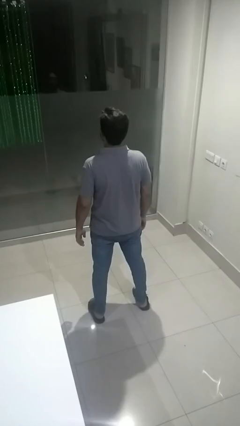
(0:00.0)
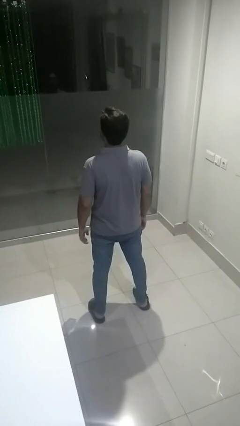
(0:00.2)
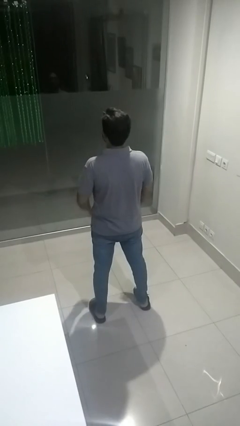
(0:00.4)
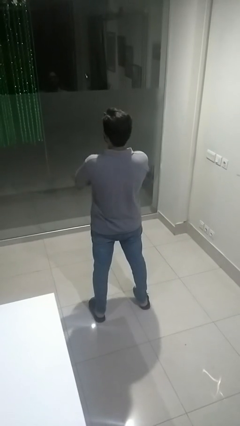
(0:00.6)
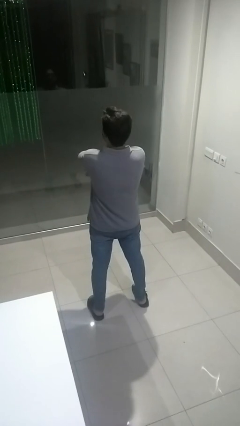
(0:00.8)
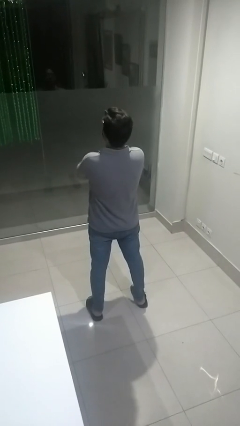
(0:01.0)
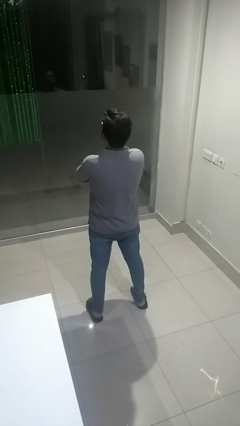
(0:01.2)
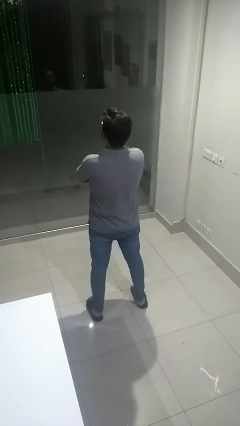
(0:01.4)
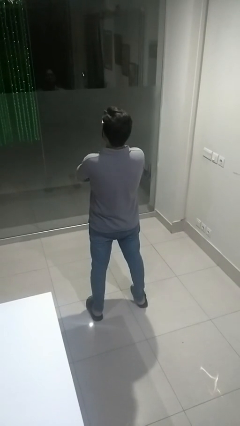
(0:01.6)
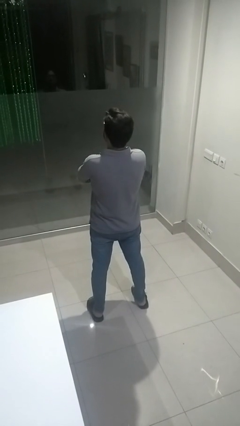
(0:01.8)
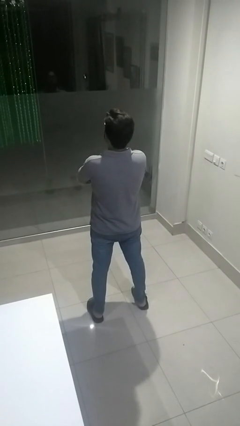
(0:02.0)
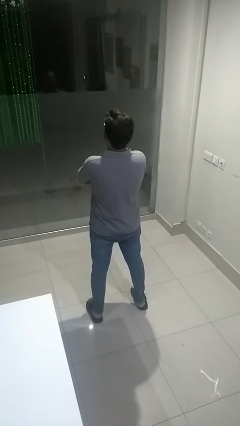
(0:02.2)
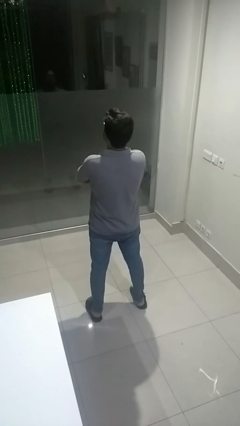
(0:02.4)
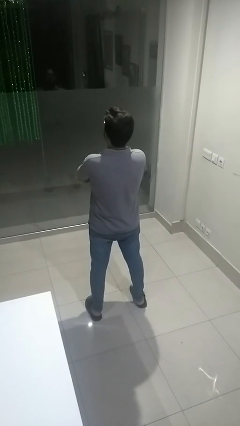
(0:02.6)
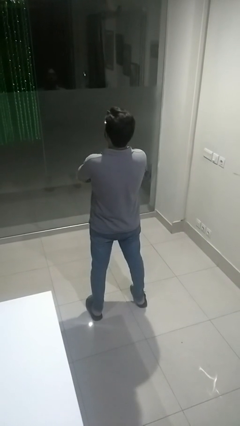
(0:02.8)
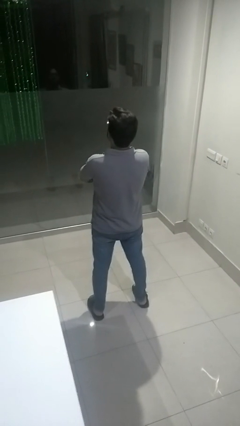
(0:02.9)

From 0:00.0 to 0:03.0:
person crosses arms

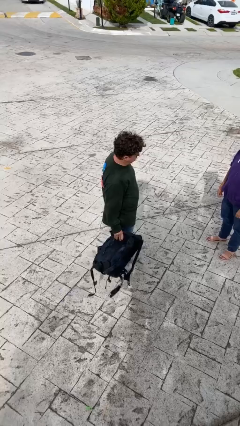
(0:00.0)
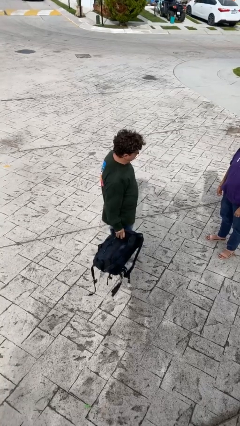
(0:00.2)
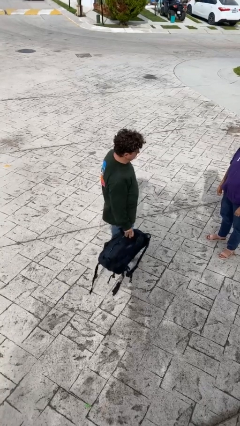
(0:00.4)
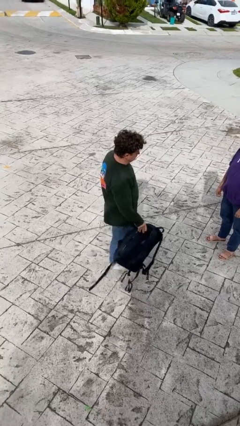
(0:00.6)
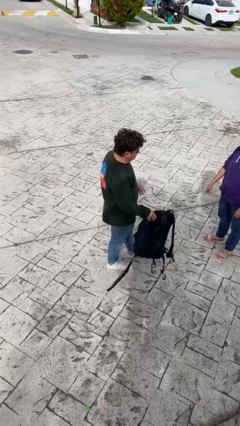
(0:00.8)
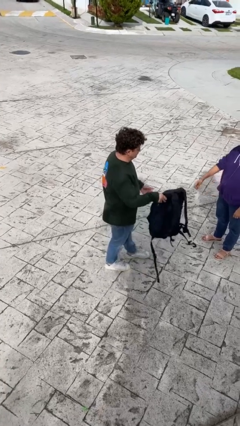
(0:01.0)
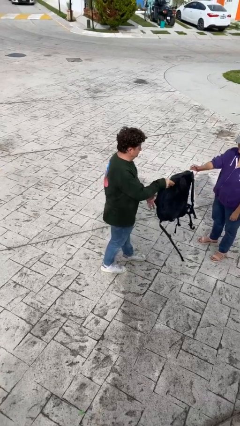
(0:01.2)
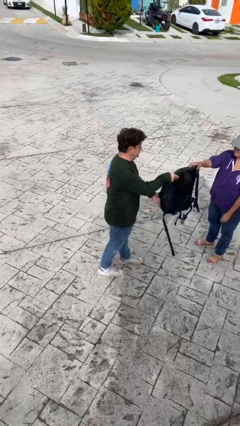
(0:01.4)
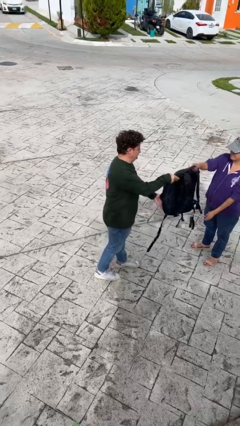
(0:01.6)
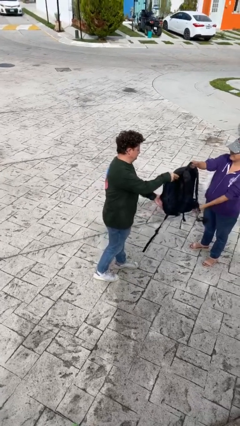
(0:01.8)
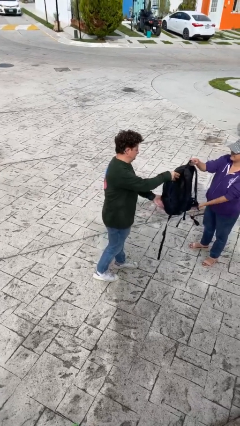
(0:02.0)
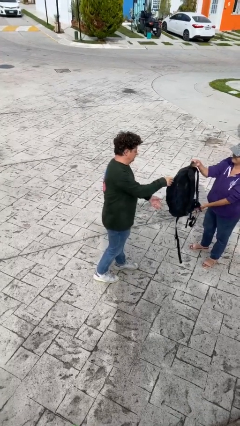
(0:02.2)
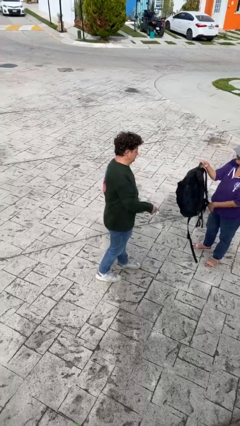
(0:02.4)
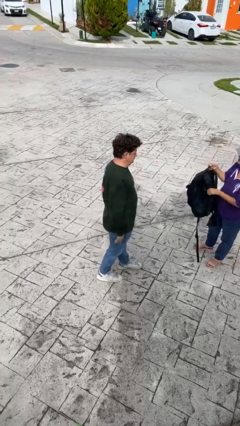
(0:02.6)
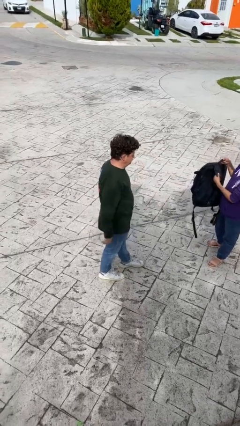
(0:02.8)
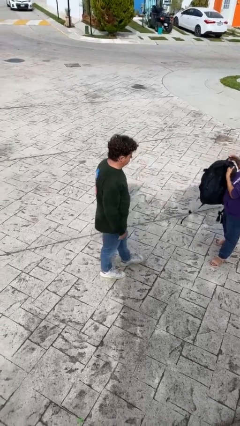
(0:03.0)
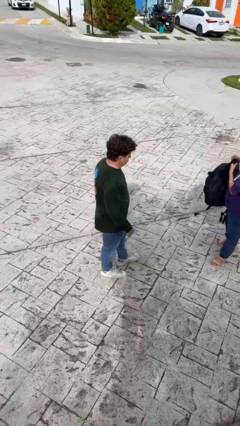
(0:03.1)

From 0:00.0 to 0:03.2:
person transfers object to person

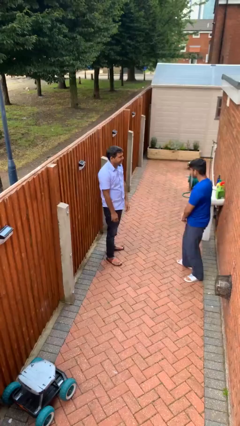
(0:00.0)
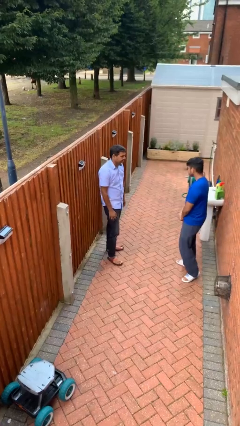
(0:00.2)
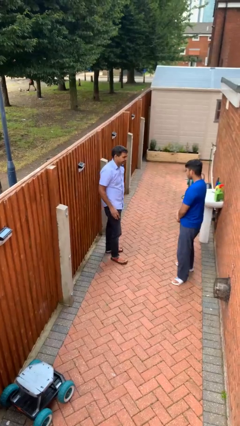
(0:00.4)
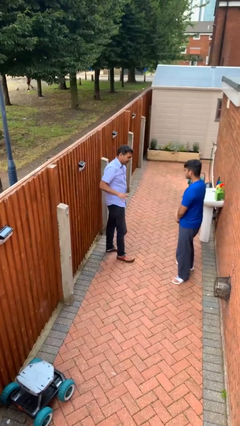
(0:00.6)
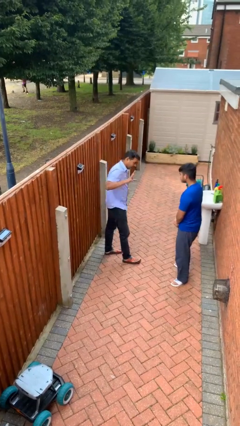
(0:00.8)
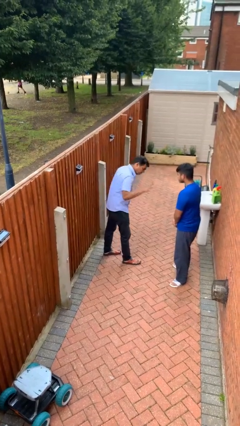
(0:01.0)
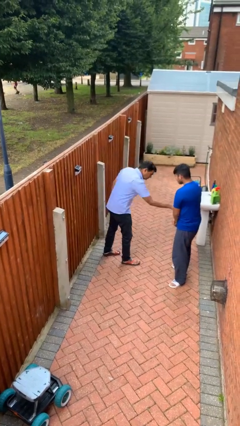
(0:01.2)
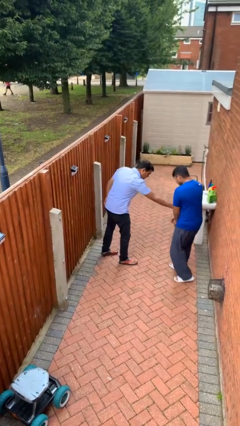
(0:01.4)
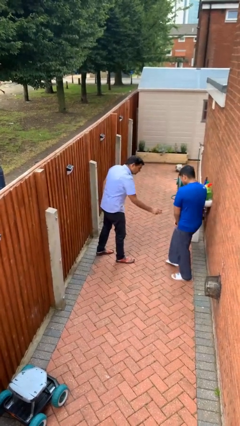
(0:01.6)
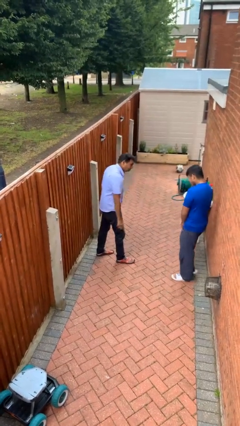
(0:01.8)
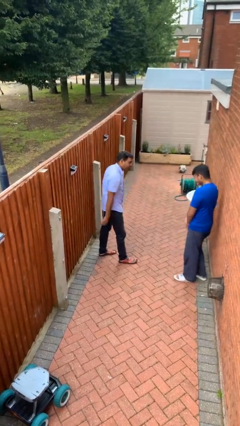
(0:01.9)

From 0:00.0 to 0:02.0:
person shoves person

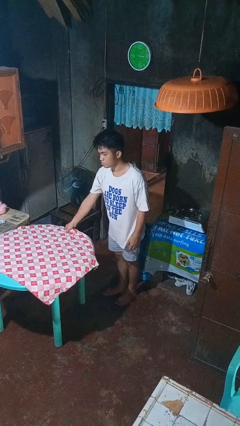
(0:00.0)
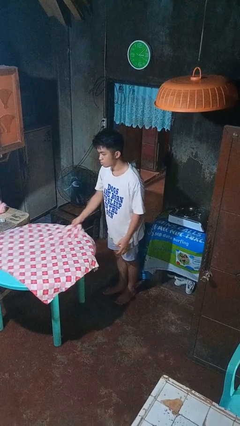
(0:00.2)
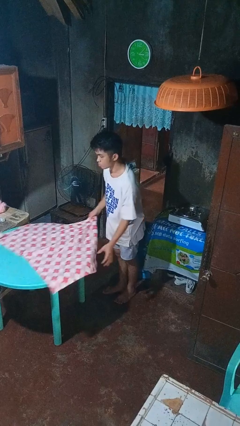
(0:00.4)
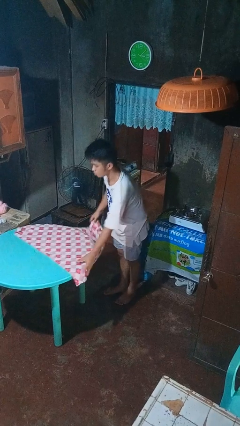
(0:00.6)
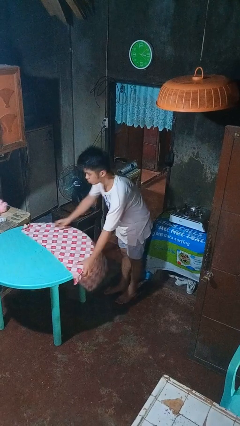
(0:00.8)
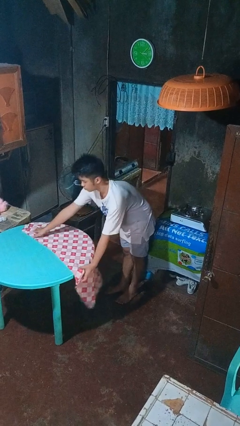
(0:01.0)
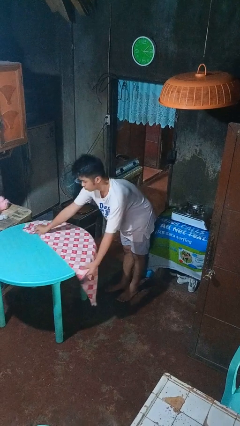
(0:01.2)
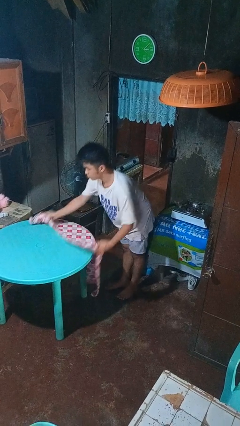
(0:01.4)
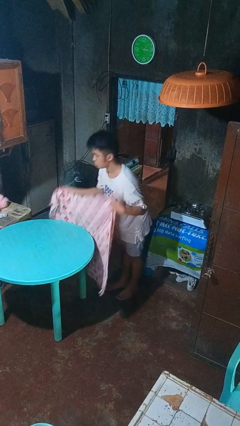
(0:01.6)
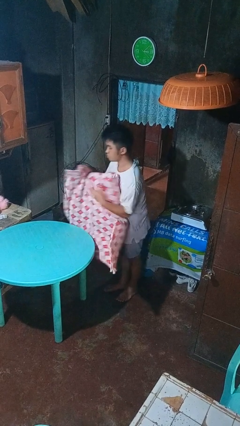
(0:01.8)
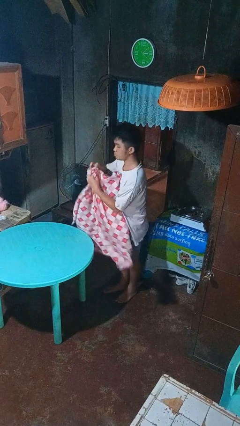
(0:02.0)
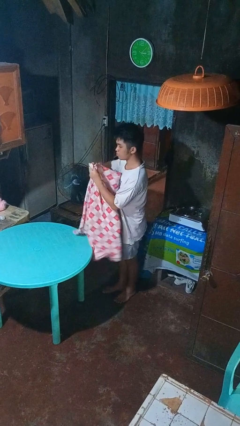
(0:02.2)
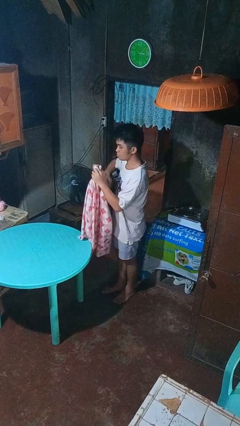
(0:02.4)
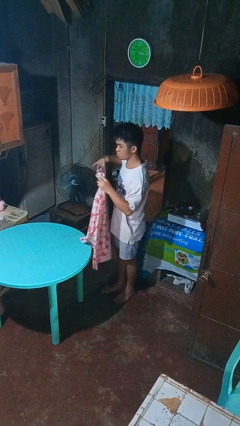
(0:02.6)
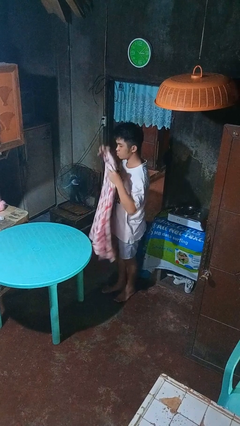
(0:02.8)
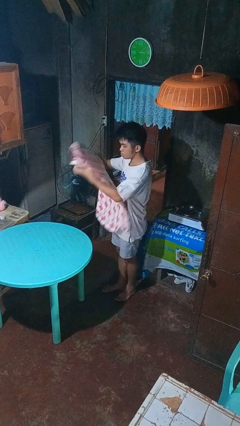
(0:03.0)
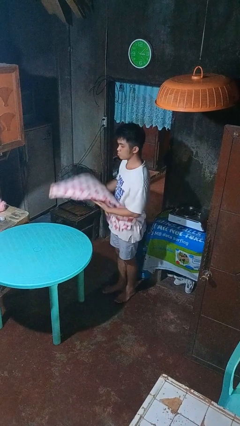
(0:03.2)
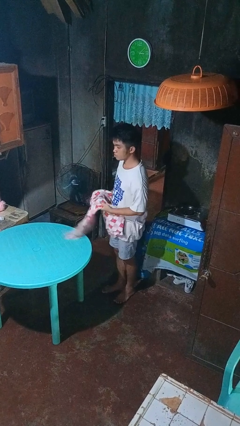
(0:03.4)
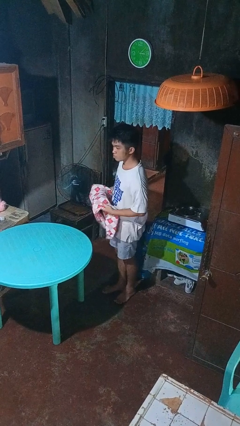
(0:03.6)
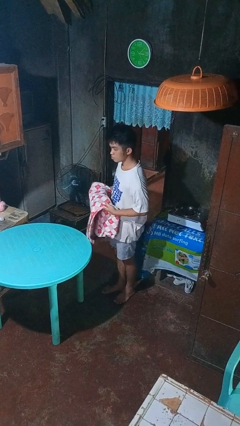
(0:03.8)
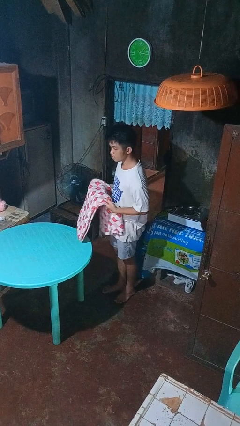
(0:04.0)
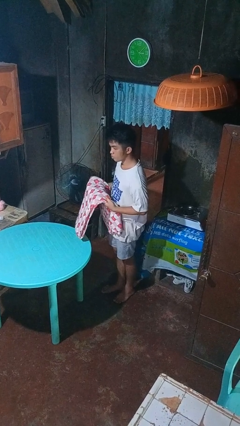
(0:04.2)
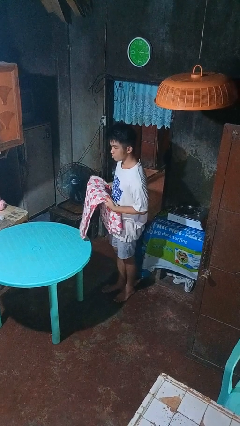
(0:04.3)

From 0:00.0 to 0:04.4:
person folds tablecloth

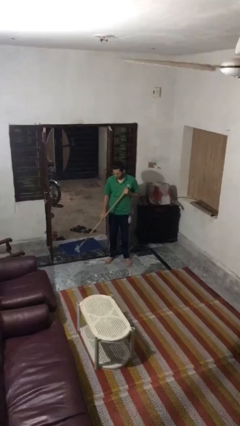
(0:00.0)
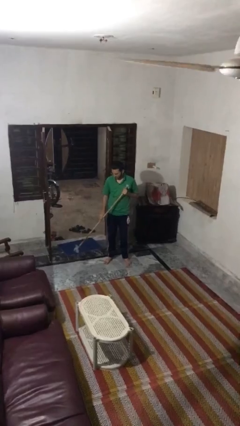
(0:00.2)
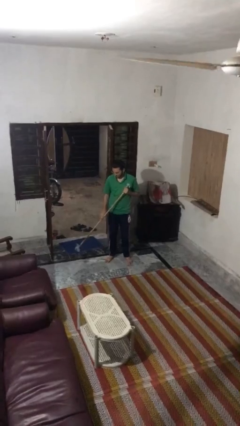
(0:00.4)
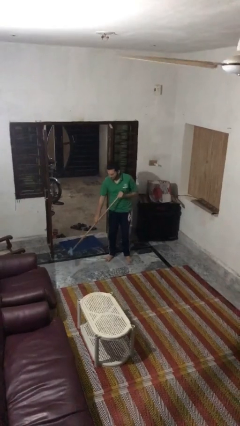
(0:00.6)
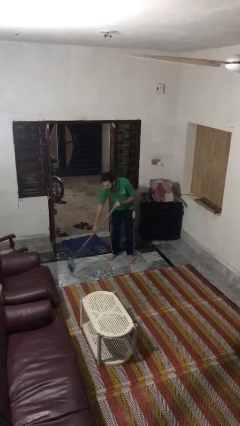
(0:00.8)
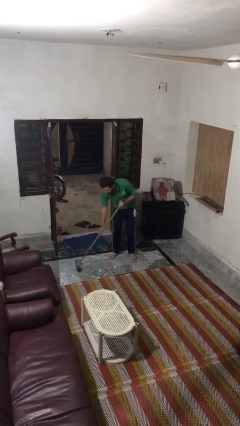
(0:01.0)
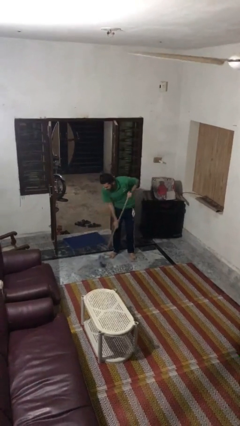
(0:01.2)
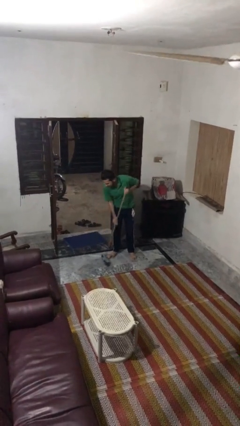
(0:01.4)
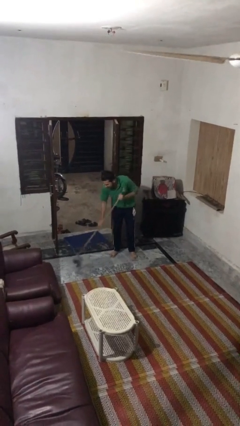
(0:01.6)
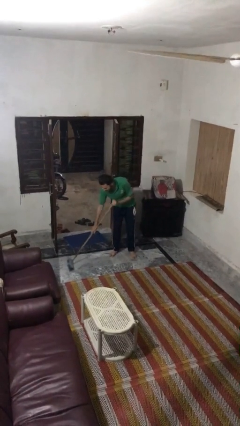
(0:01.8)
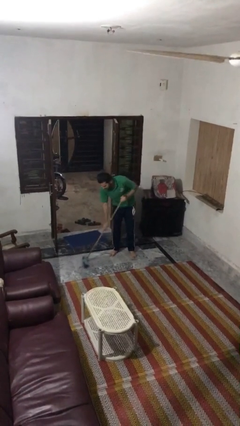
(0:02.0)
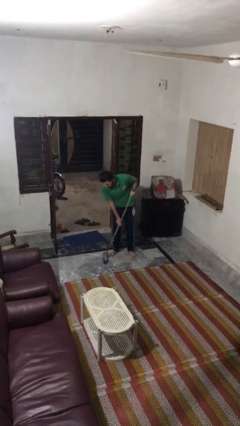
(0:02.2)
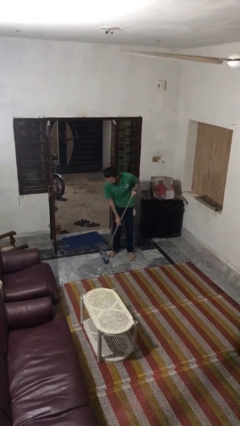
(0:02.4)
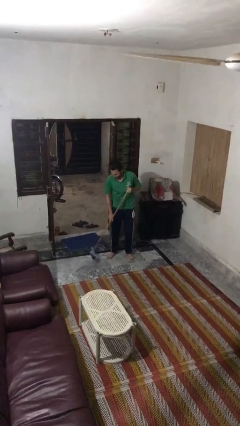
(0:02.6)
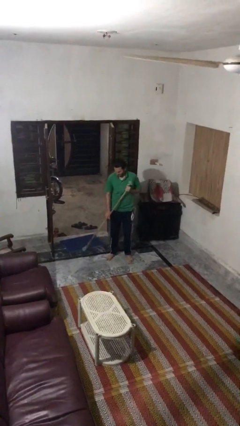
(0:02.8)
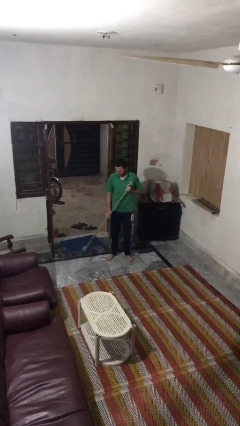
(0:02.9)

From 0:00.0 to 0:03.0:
person sweeps floor

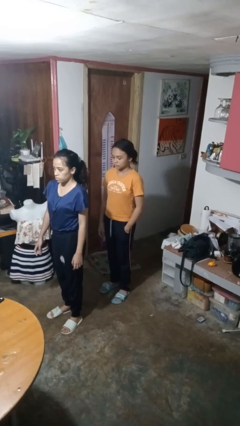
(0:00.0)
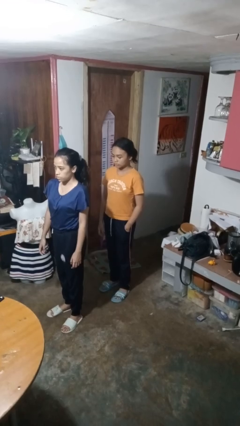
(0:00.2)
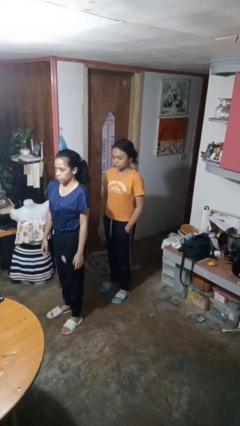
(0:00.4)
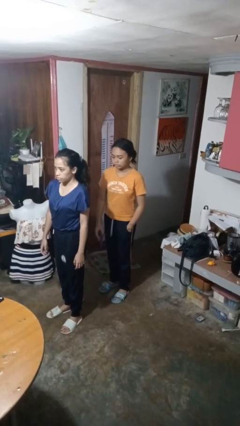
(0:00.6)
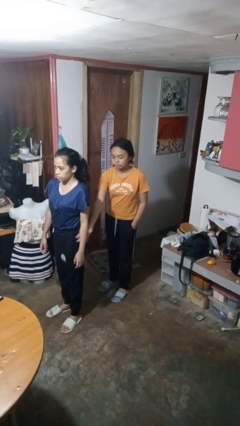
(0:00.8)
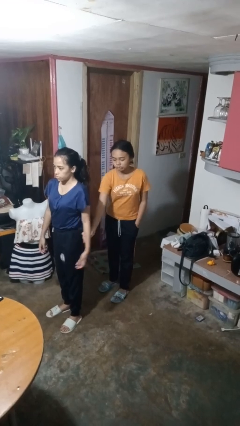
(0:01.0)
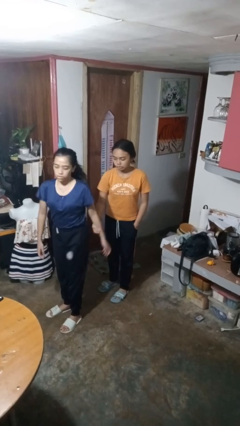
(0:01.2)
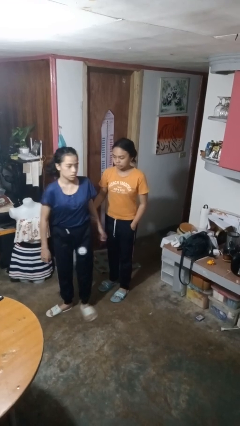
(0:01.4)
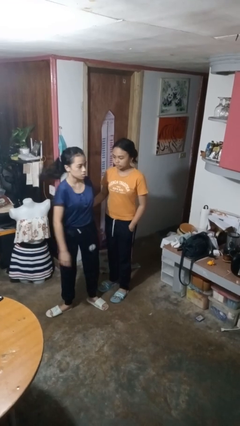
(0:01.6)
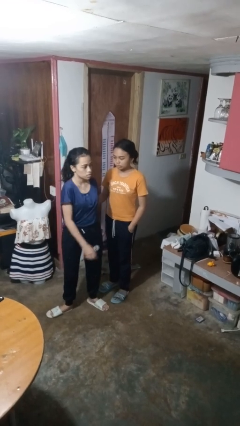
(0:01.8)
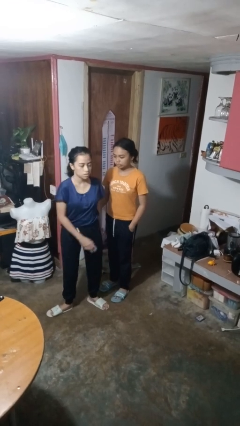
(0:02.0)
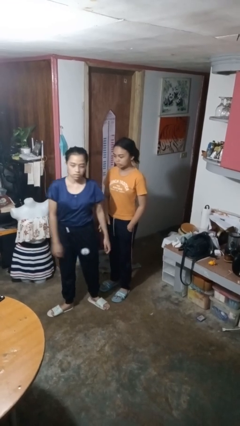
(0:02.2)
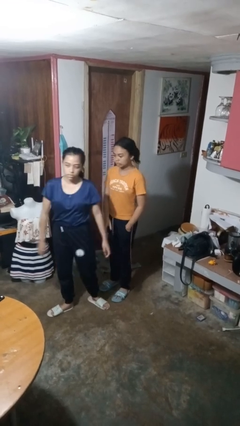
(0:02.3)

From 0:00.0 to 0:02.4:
person grabs person by forearm
